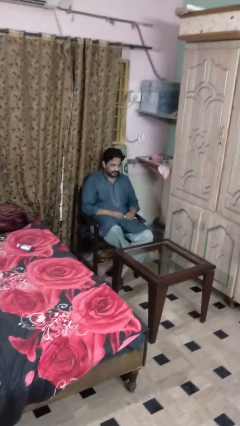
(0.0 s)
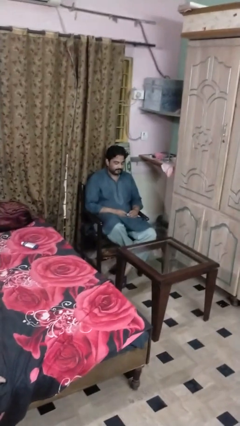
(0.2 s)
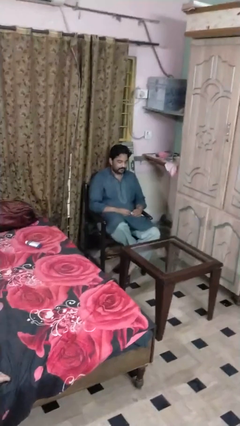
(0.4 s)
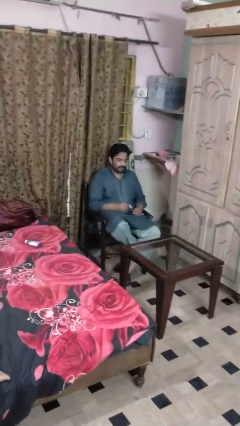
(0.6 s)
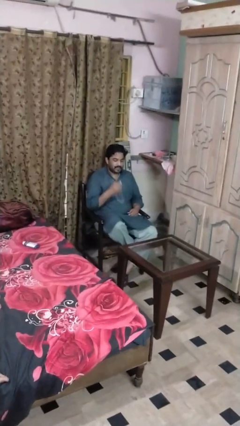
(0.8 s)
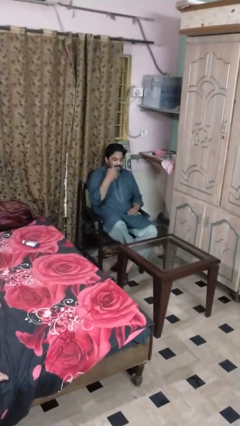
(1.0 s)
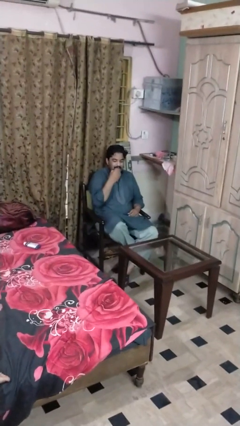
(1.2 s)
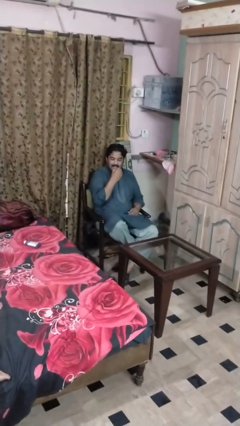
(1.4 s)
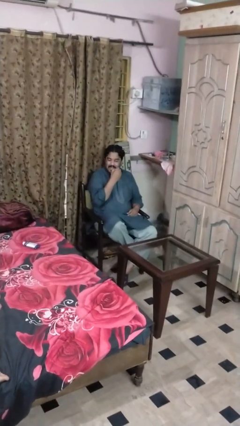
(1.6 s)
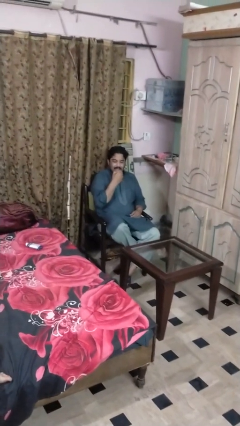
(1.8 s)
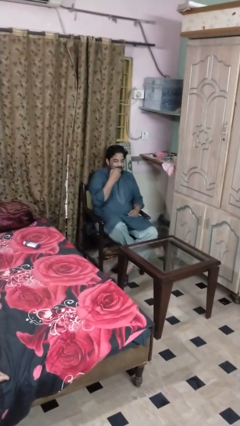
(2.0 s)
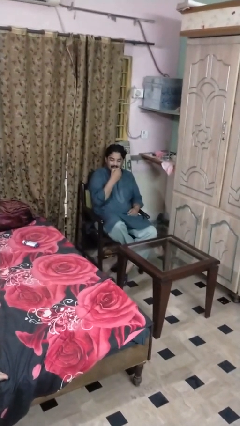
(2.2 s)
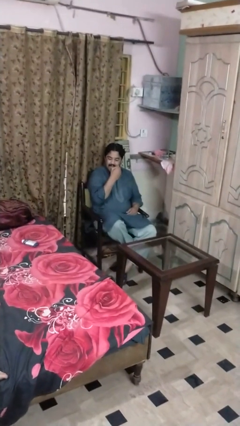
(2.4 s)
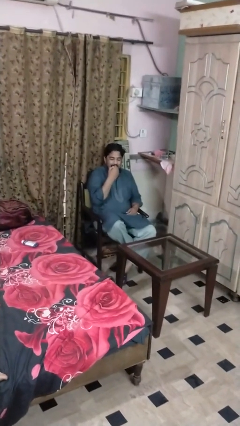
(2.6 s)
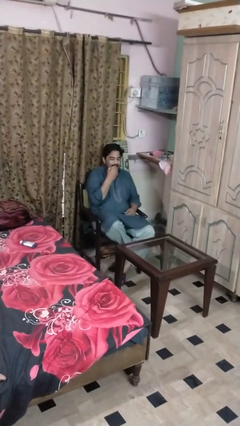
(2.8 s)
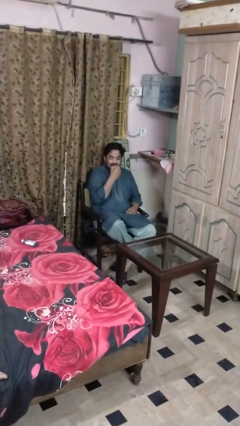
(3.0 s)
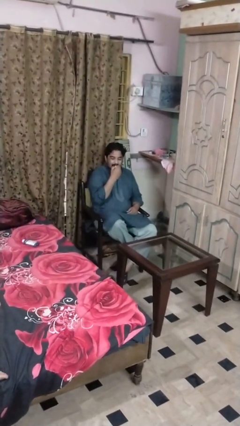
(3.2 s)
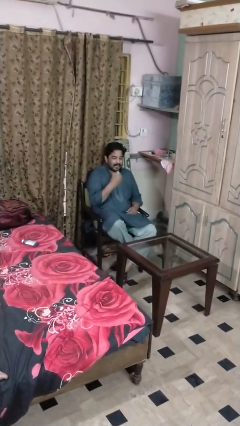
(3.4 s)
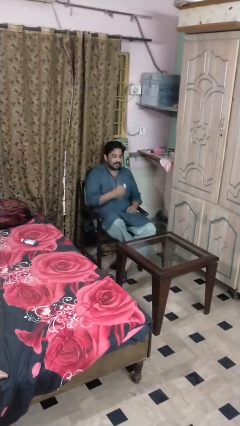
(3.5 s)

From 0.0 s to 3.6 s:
person applies lip makeup

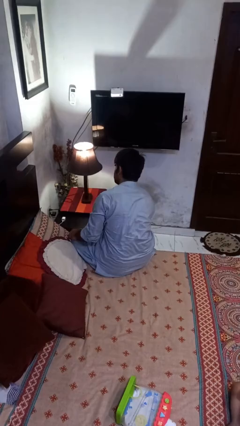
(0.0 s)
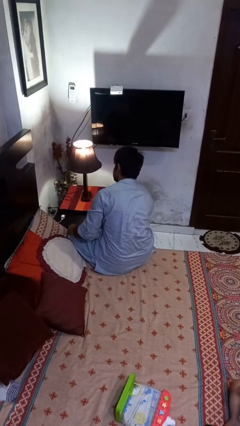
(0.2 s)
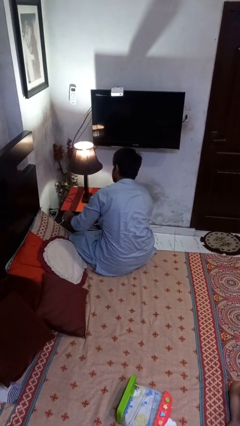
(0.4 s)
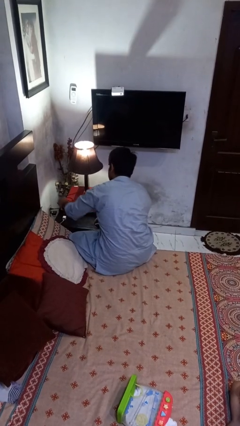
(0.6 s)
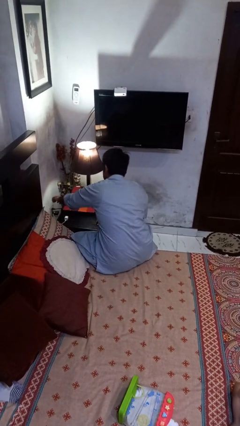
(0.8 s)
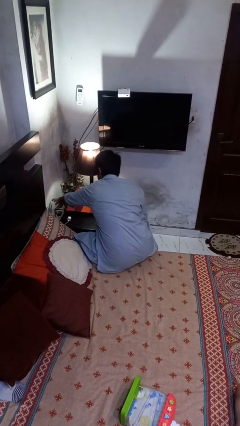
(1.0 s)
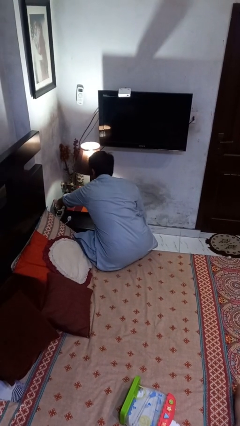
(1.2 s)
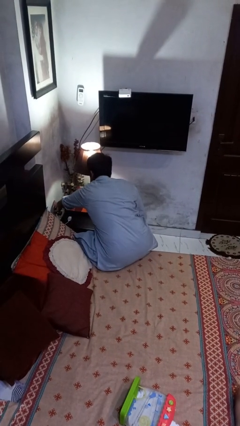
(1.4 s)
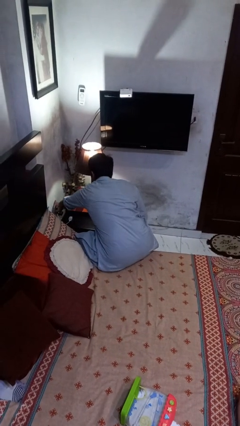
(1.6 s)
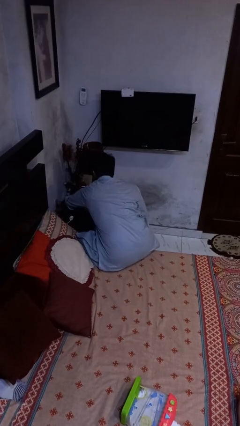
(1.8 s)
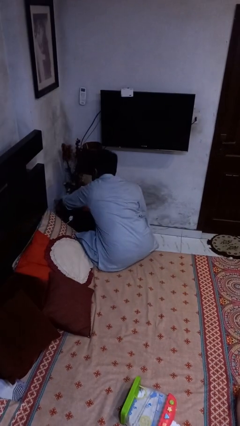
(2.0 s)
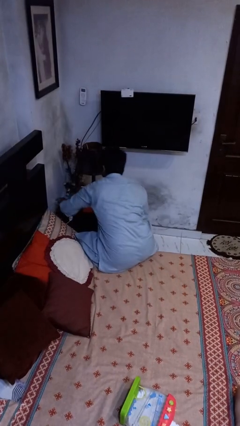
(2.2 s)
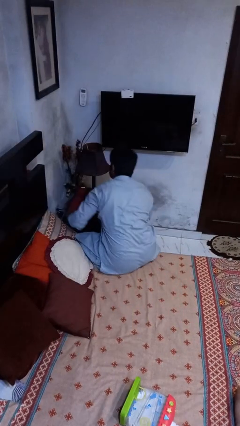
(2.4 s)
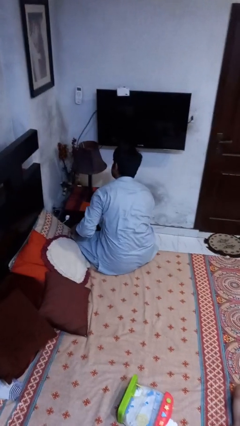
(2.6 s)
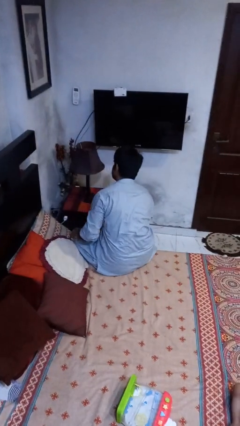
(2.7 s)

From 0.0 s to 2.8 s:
person turns off lamp

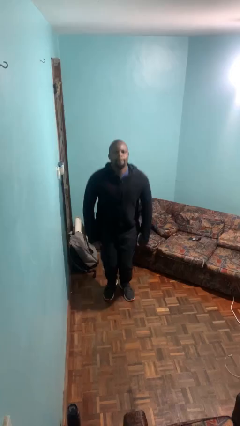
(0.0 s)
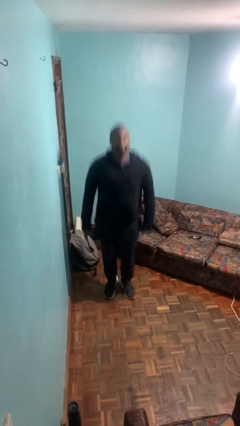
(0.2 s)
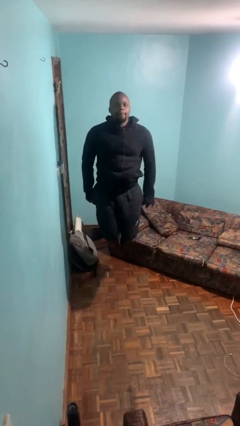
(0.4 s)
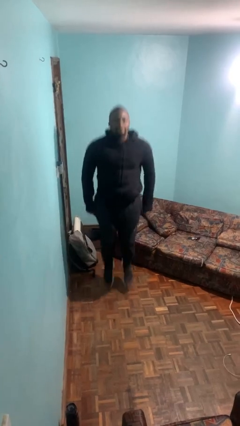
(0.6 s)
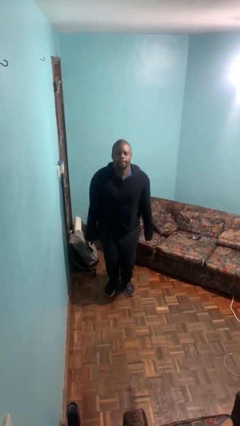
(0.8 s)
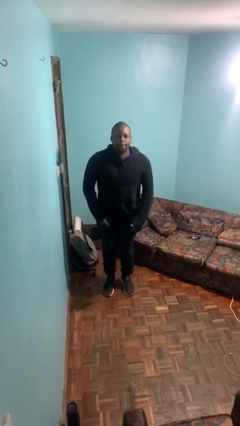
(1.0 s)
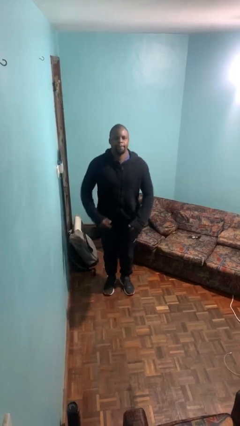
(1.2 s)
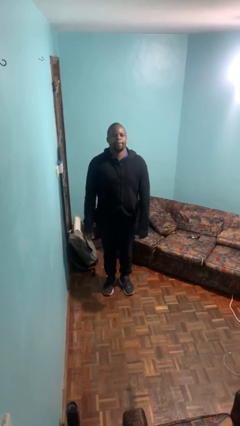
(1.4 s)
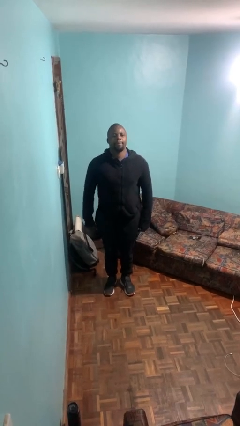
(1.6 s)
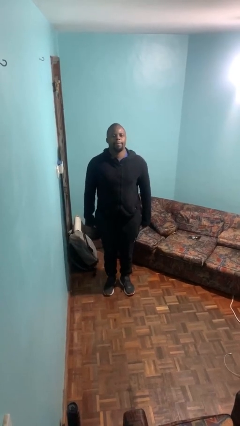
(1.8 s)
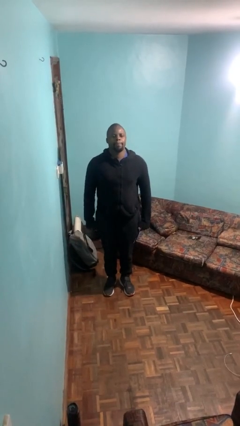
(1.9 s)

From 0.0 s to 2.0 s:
person jumps

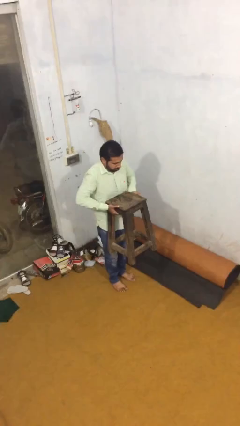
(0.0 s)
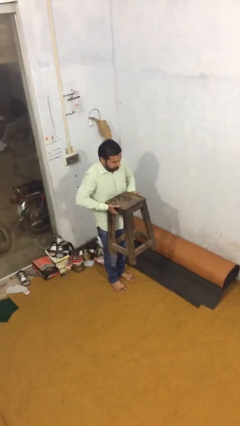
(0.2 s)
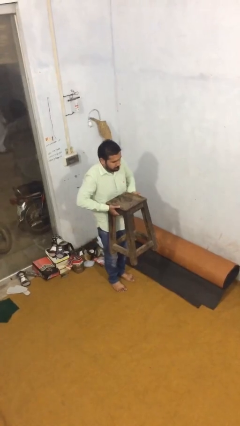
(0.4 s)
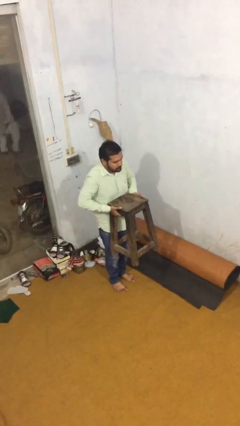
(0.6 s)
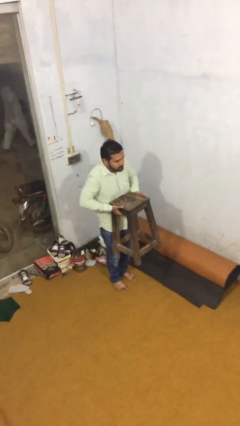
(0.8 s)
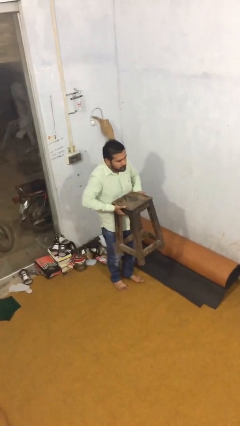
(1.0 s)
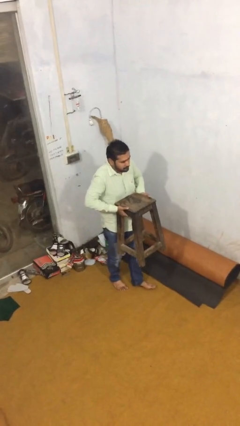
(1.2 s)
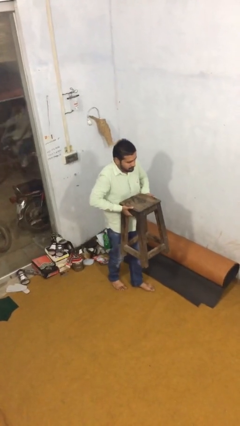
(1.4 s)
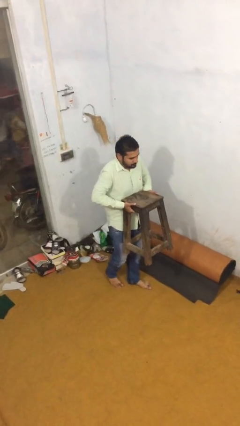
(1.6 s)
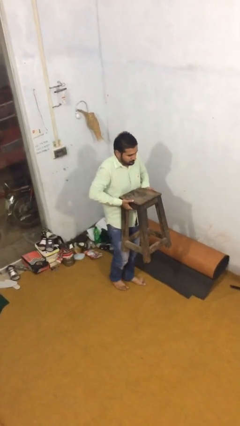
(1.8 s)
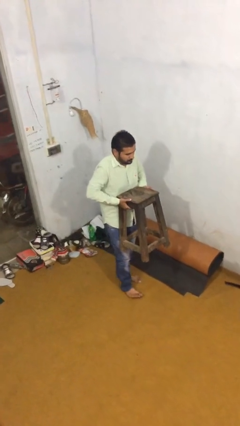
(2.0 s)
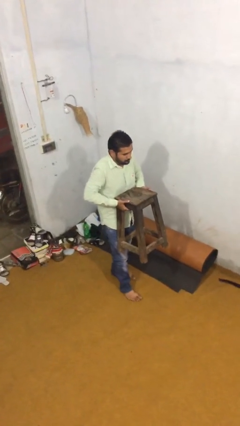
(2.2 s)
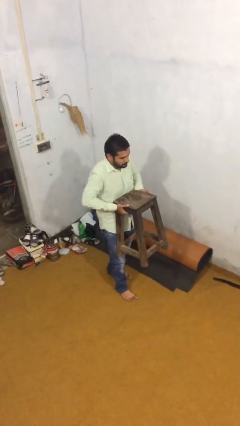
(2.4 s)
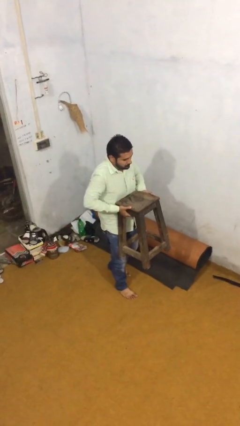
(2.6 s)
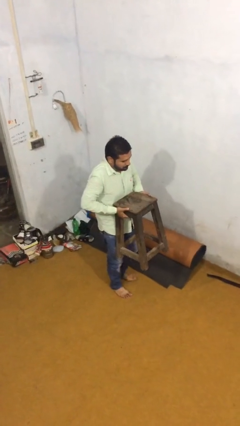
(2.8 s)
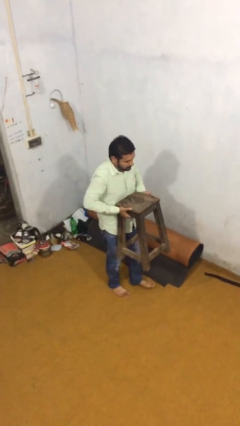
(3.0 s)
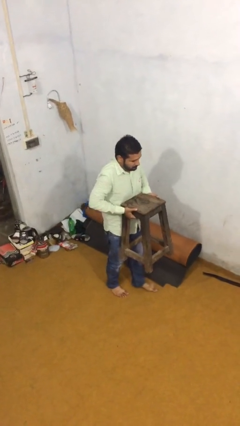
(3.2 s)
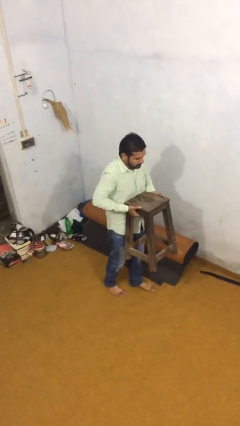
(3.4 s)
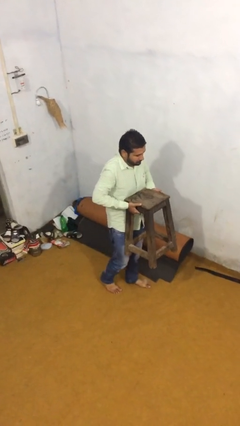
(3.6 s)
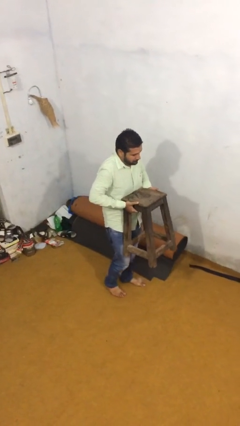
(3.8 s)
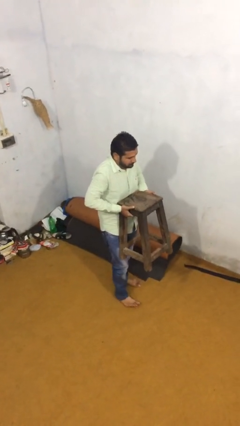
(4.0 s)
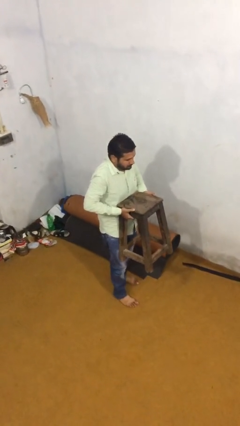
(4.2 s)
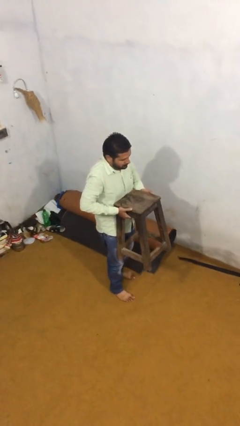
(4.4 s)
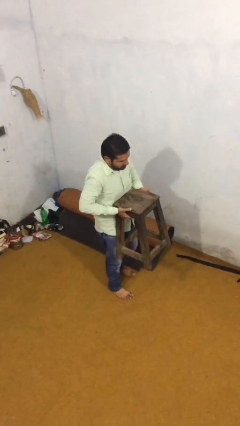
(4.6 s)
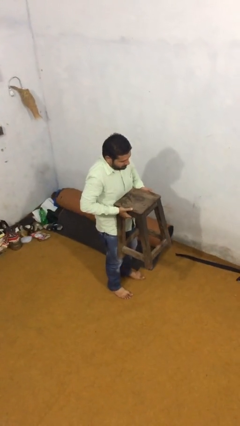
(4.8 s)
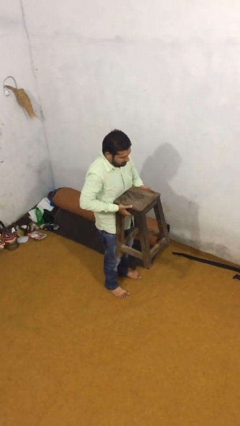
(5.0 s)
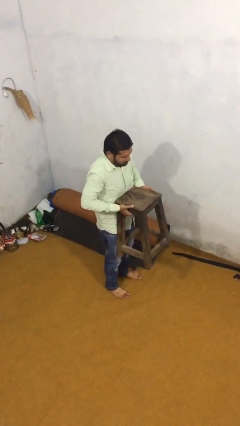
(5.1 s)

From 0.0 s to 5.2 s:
person carries heavy object

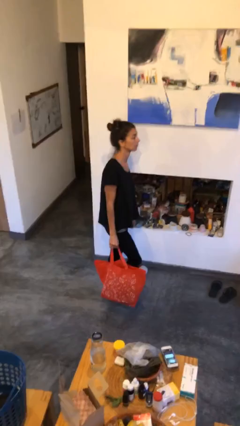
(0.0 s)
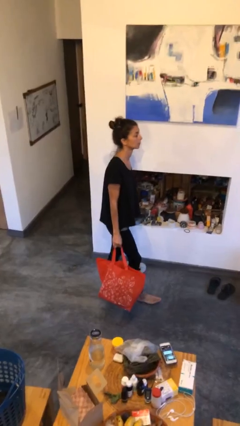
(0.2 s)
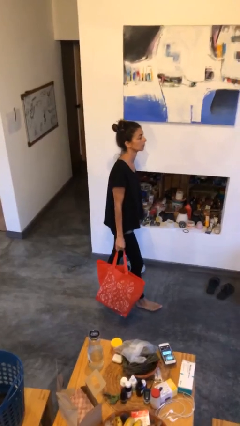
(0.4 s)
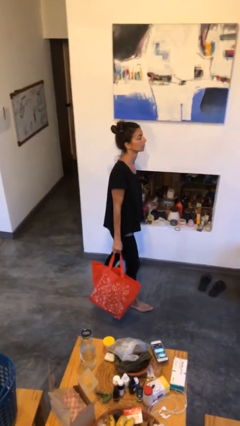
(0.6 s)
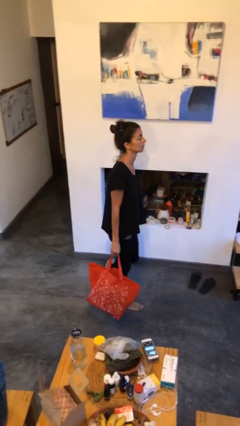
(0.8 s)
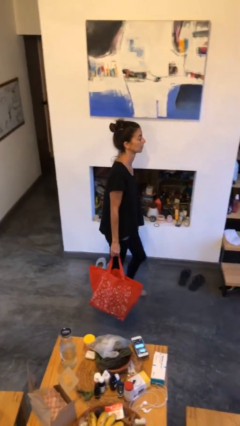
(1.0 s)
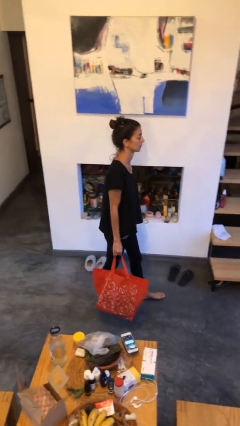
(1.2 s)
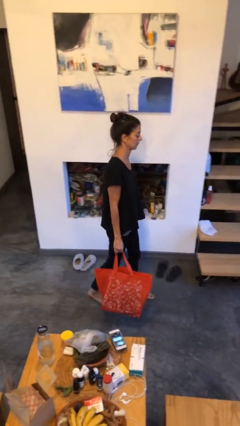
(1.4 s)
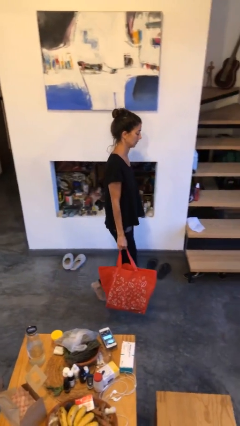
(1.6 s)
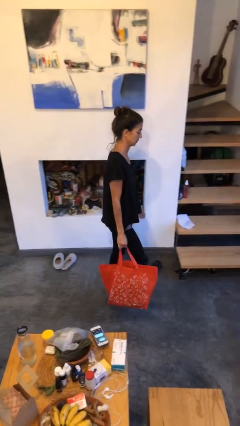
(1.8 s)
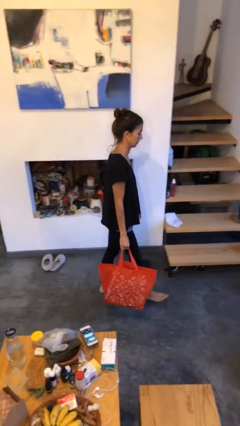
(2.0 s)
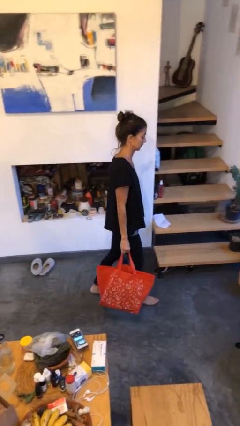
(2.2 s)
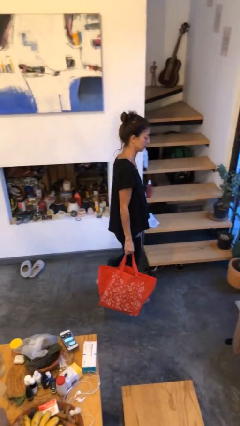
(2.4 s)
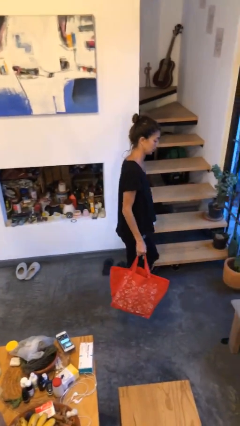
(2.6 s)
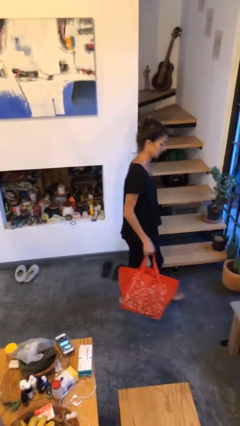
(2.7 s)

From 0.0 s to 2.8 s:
person carries groceries

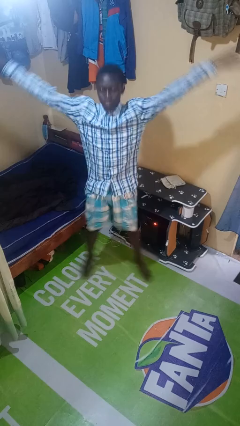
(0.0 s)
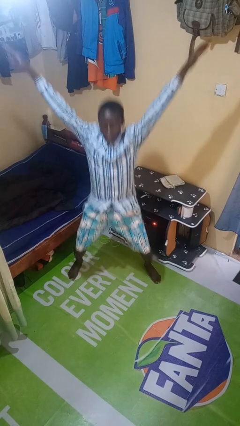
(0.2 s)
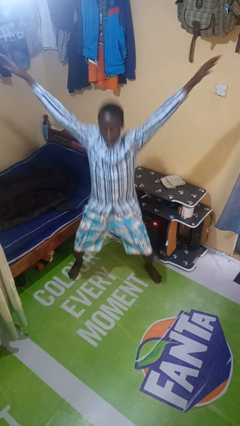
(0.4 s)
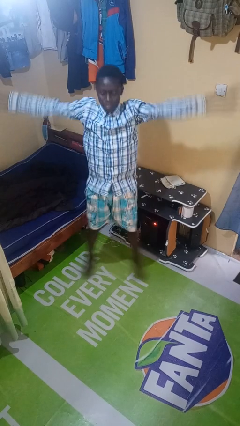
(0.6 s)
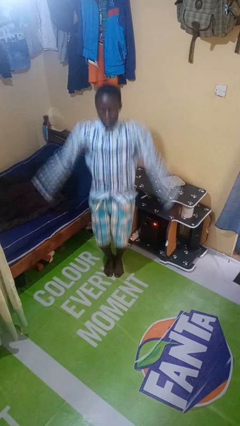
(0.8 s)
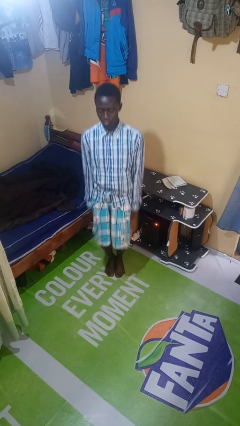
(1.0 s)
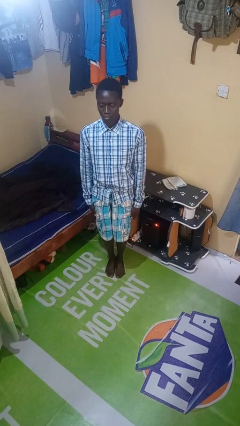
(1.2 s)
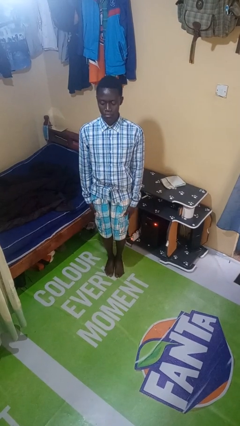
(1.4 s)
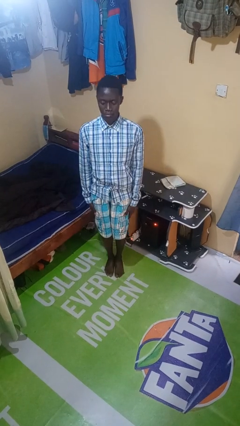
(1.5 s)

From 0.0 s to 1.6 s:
person exercises with jumping jacks
